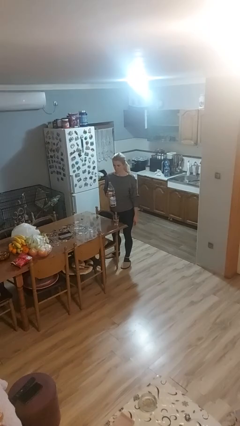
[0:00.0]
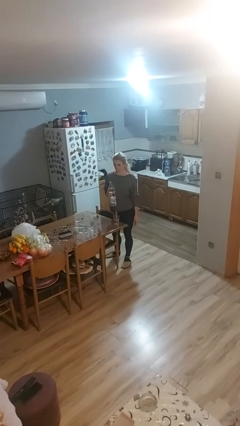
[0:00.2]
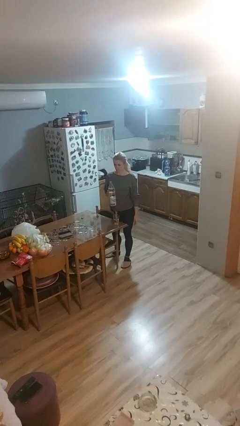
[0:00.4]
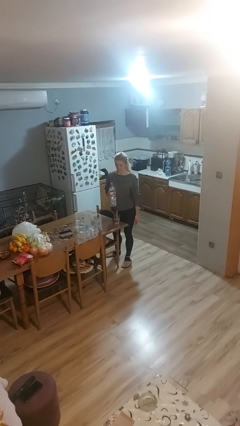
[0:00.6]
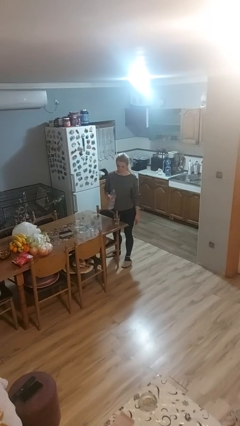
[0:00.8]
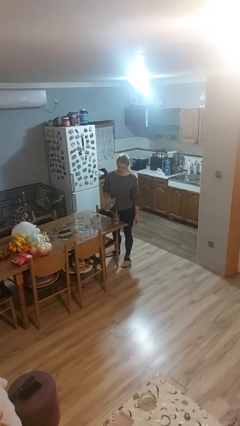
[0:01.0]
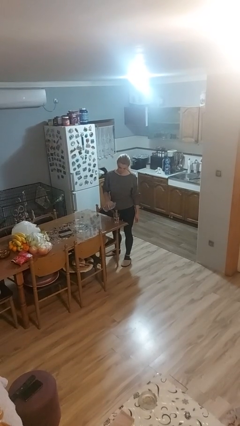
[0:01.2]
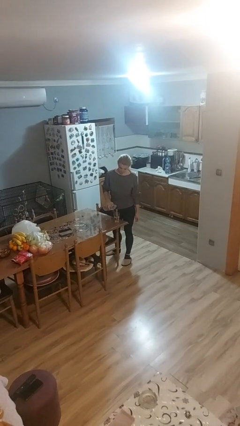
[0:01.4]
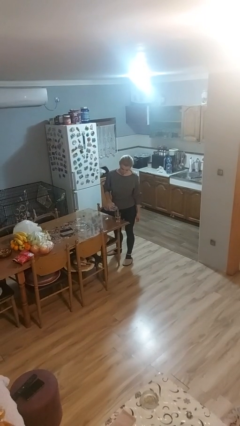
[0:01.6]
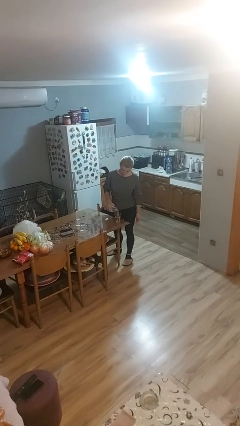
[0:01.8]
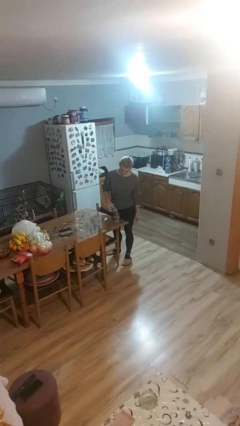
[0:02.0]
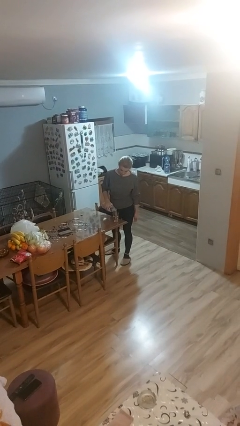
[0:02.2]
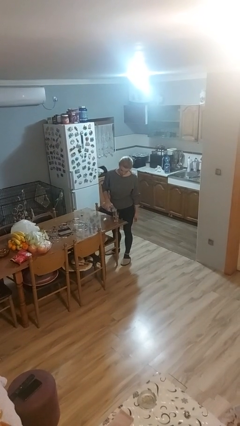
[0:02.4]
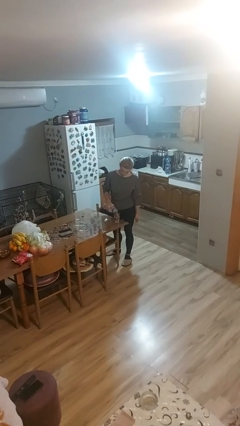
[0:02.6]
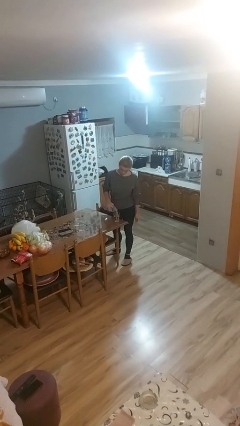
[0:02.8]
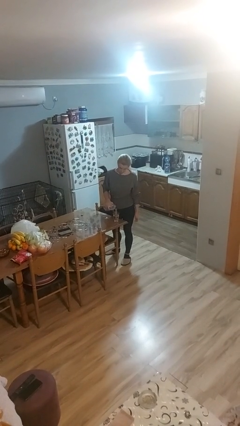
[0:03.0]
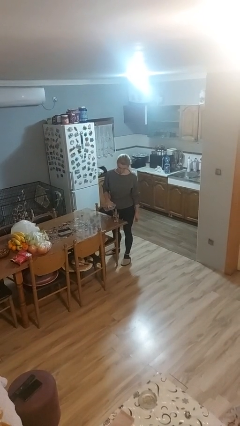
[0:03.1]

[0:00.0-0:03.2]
person pours liquid into cup

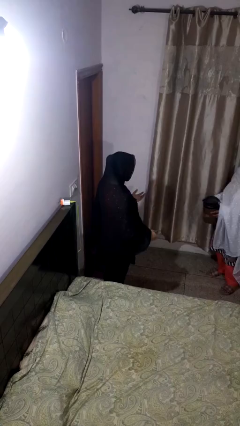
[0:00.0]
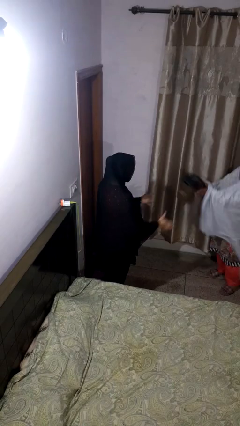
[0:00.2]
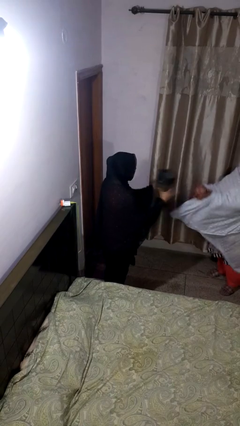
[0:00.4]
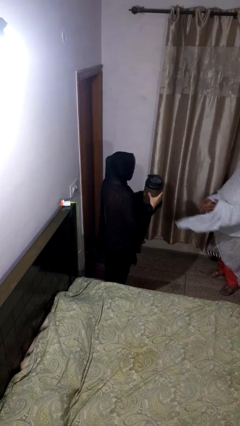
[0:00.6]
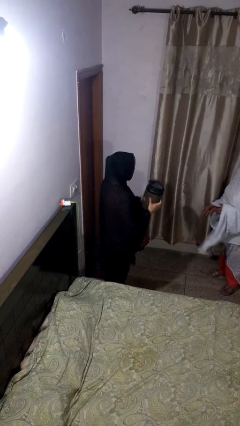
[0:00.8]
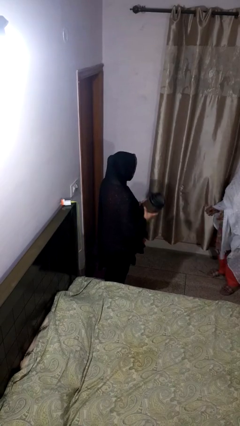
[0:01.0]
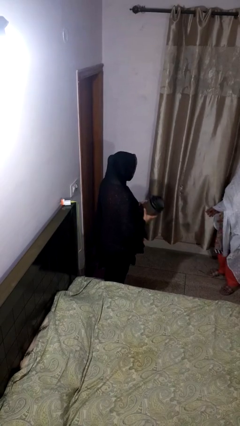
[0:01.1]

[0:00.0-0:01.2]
person catches object from person

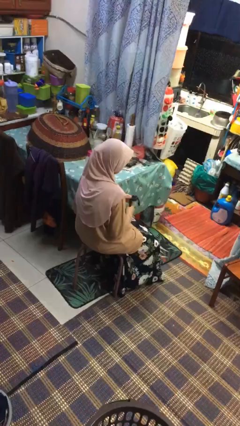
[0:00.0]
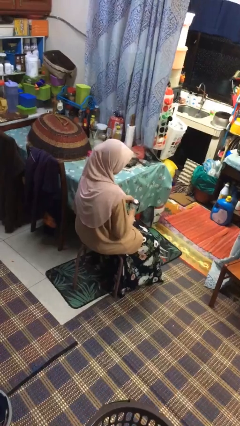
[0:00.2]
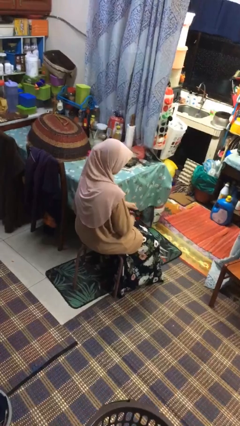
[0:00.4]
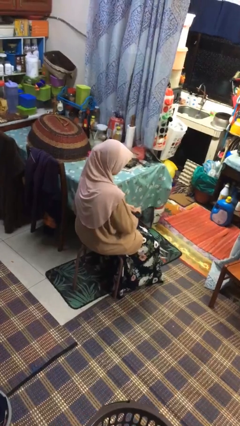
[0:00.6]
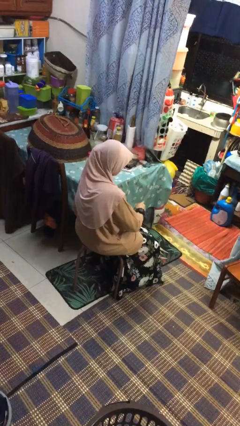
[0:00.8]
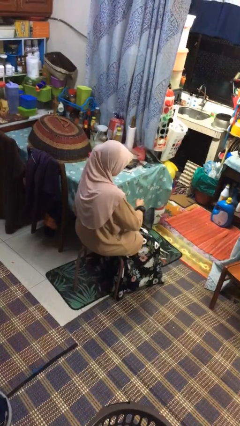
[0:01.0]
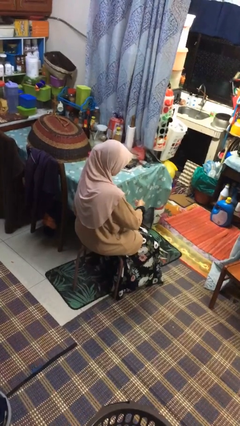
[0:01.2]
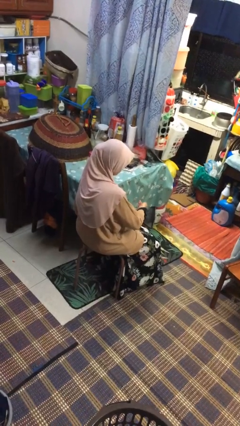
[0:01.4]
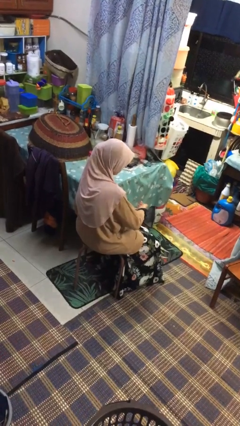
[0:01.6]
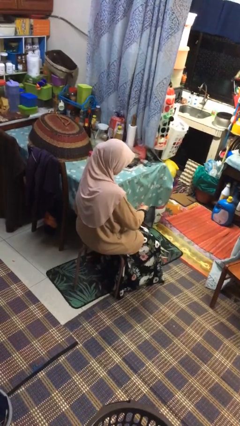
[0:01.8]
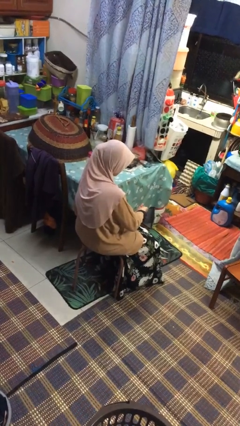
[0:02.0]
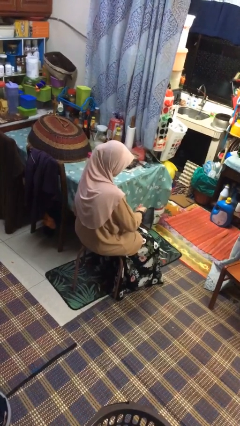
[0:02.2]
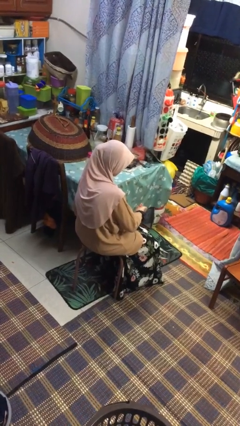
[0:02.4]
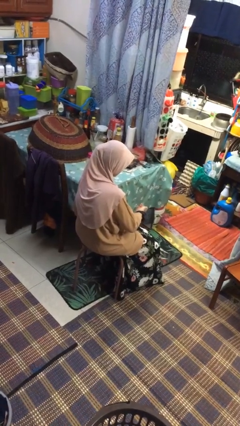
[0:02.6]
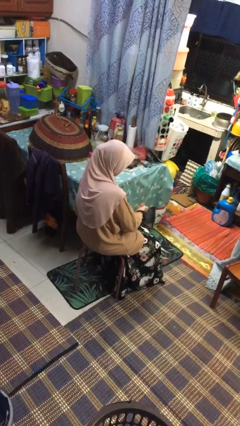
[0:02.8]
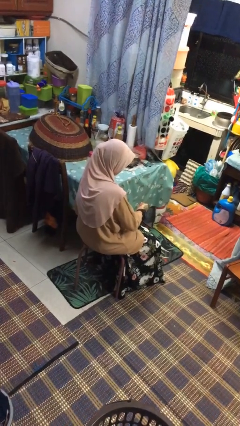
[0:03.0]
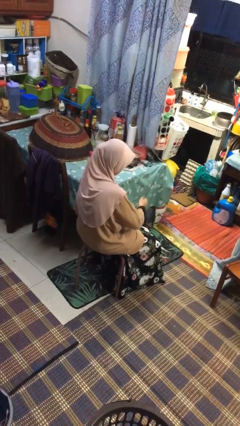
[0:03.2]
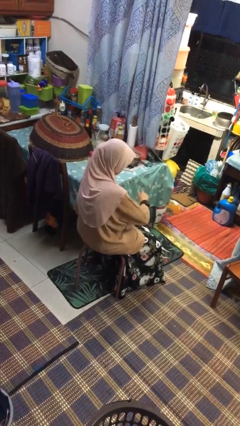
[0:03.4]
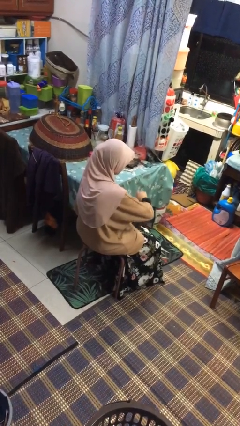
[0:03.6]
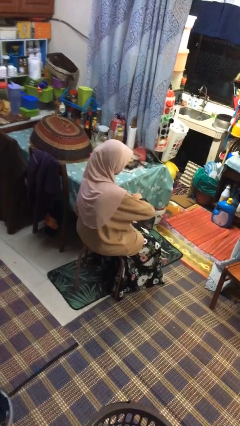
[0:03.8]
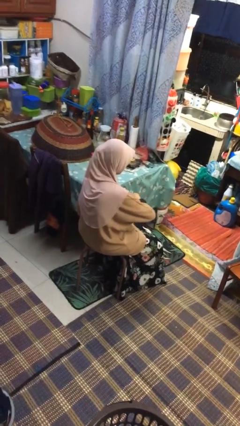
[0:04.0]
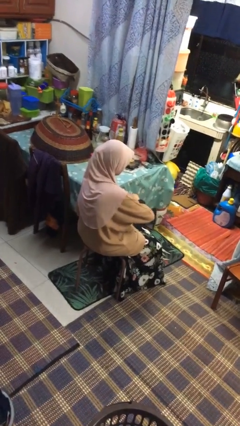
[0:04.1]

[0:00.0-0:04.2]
person puts on wristwatch

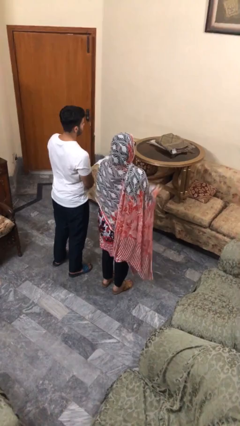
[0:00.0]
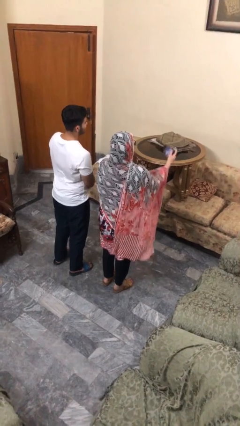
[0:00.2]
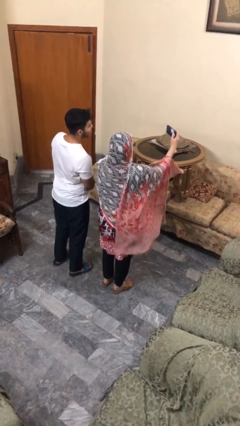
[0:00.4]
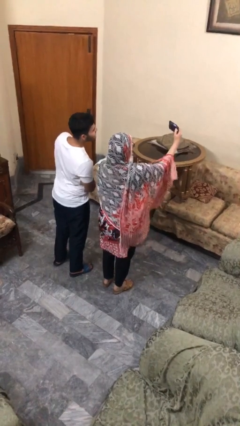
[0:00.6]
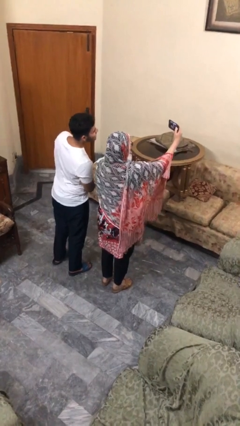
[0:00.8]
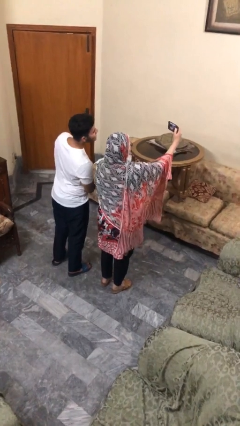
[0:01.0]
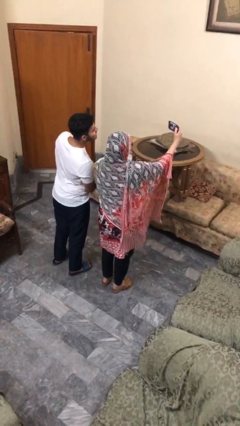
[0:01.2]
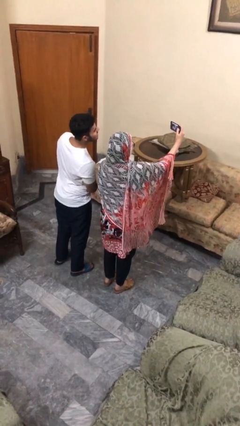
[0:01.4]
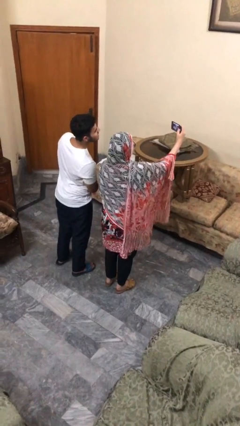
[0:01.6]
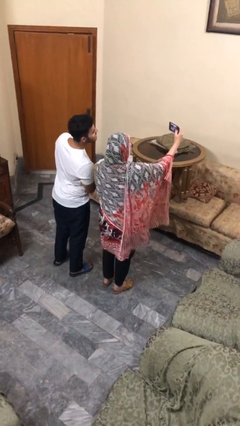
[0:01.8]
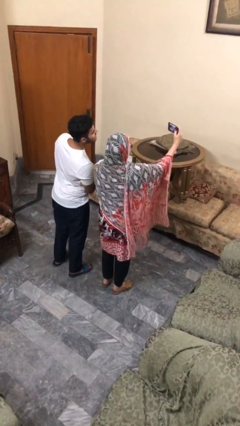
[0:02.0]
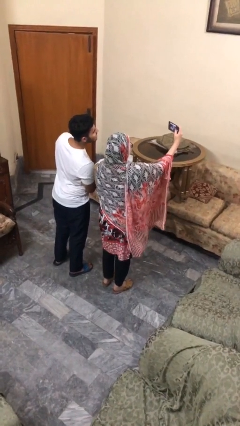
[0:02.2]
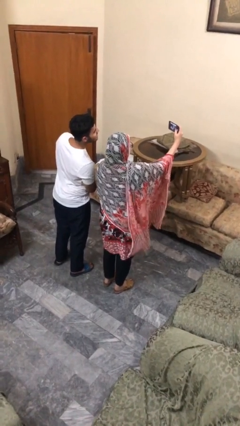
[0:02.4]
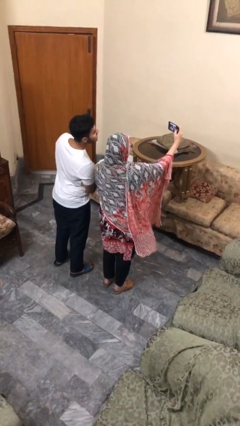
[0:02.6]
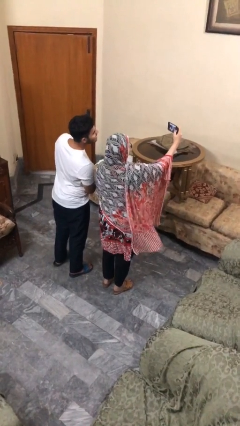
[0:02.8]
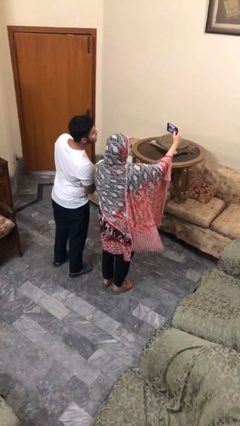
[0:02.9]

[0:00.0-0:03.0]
person takes selfie with person

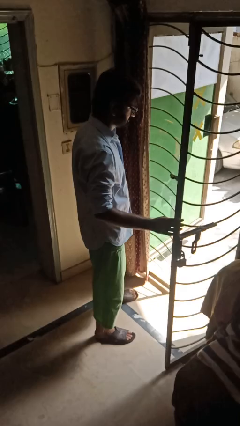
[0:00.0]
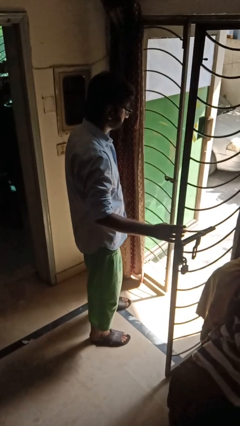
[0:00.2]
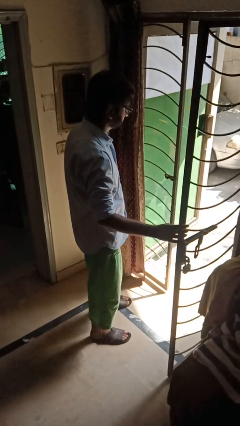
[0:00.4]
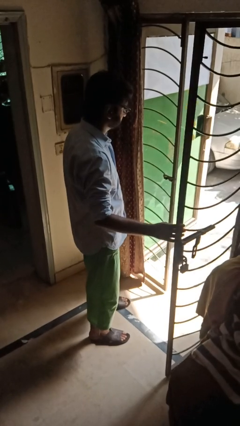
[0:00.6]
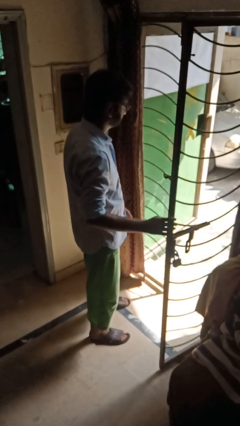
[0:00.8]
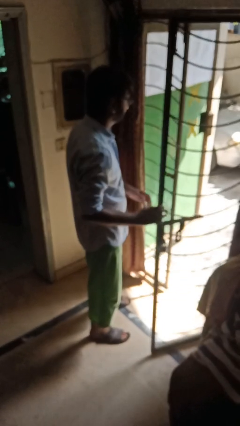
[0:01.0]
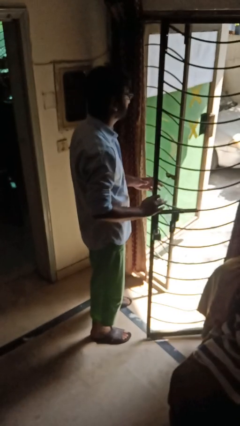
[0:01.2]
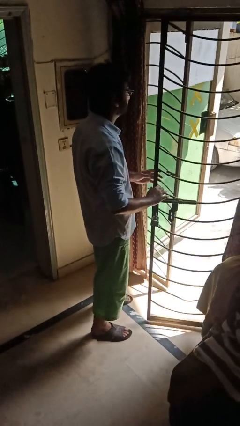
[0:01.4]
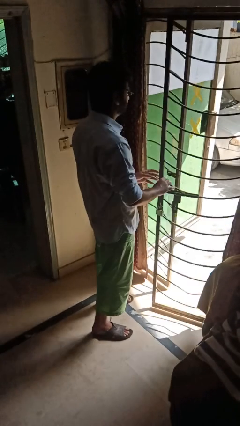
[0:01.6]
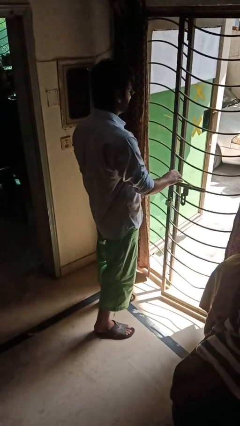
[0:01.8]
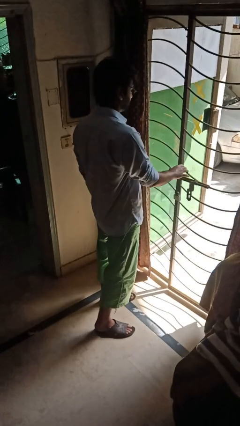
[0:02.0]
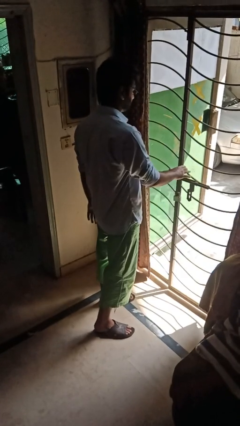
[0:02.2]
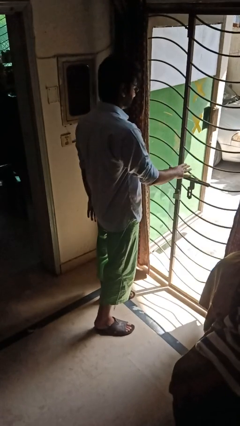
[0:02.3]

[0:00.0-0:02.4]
person closes gate

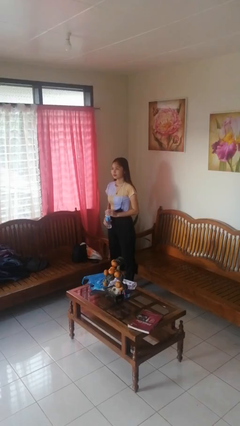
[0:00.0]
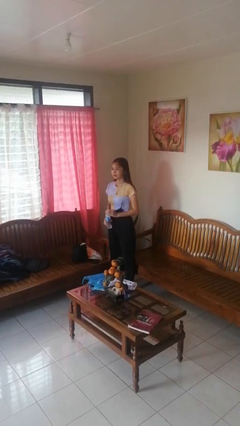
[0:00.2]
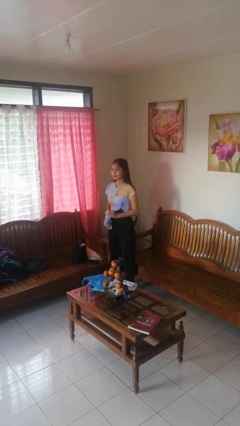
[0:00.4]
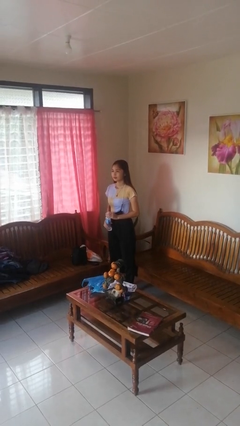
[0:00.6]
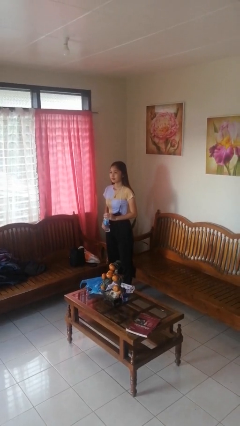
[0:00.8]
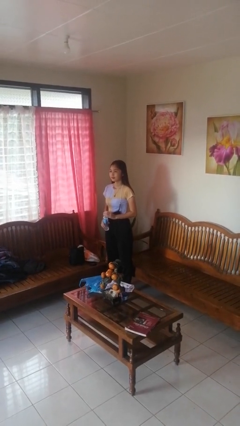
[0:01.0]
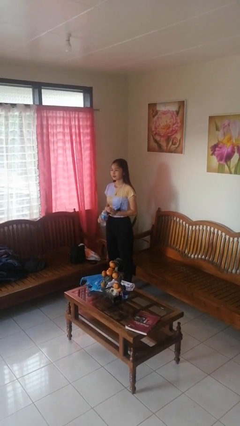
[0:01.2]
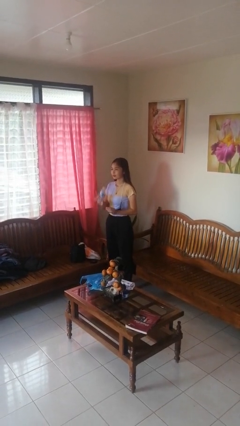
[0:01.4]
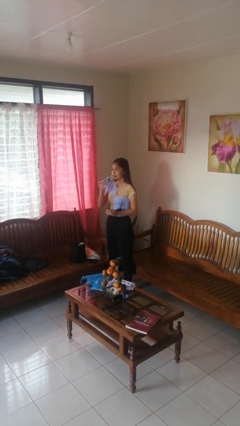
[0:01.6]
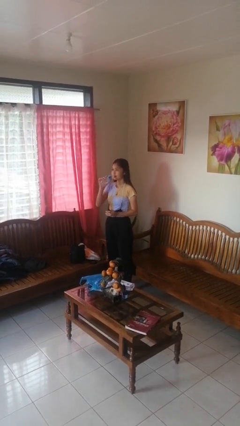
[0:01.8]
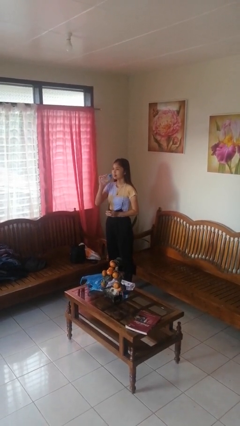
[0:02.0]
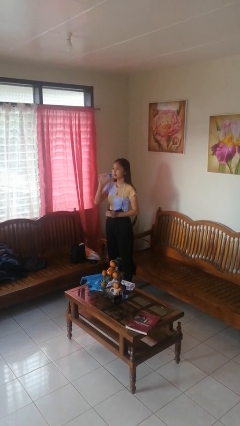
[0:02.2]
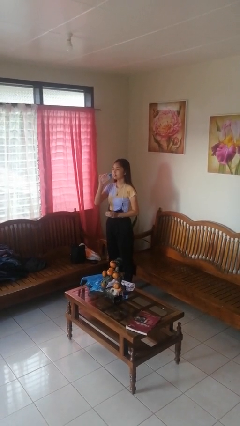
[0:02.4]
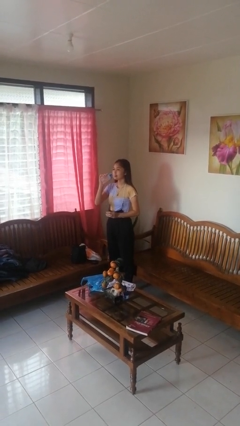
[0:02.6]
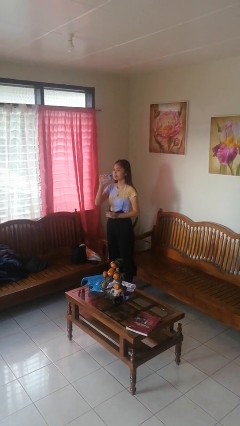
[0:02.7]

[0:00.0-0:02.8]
person drinks from bottle

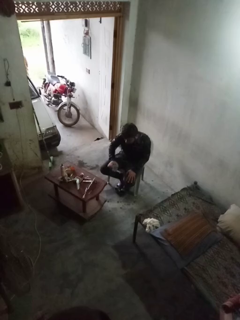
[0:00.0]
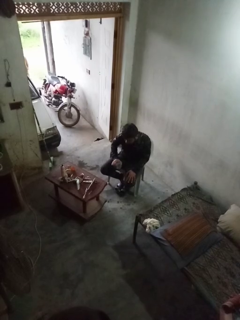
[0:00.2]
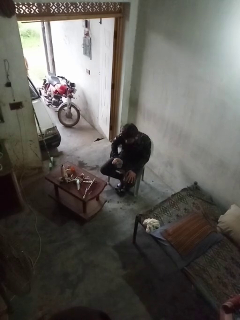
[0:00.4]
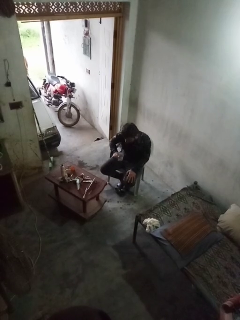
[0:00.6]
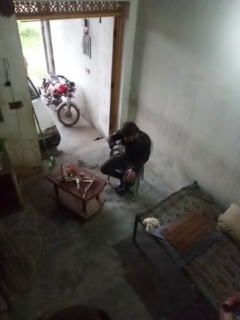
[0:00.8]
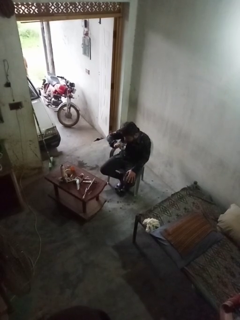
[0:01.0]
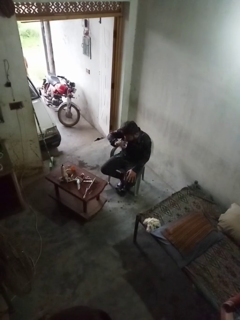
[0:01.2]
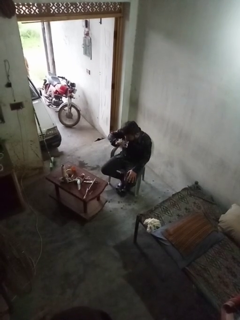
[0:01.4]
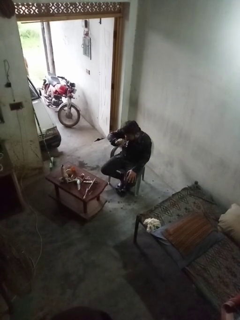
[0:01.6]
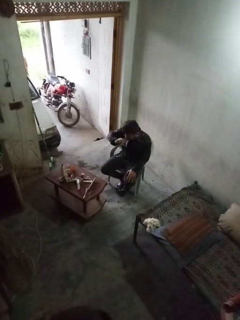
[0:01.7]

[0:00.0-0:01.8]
person drinks from shotglass
